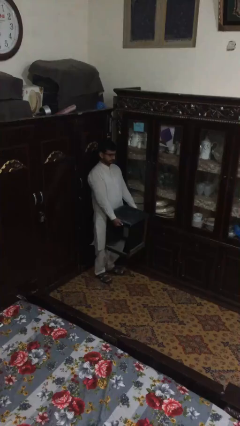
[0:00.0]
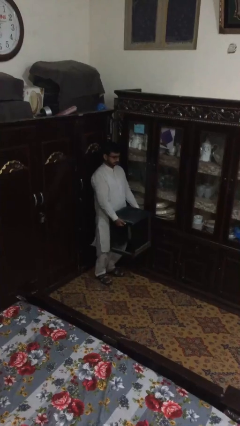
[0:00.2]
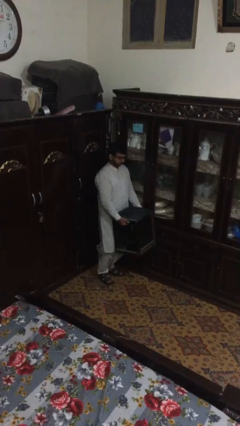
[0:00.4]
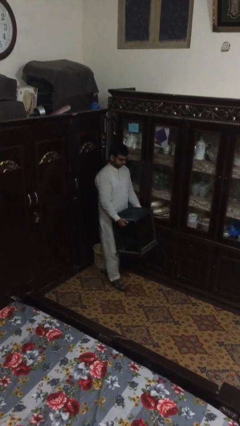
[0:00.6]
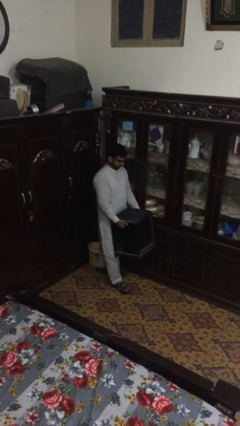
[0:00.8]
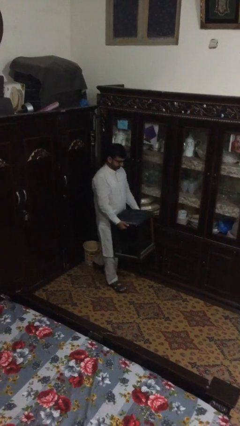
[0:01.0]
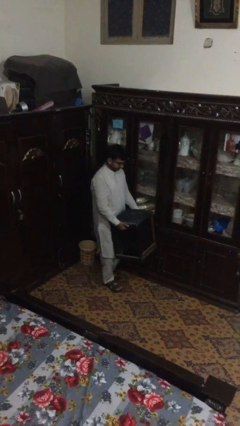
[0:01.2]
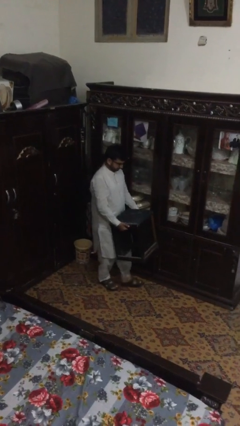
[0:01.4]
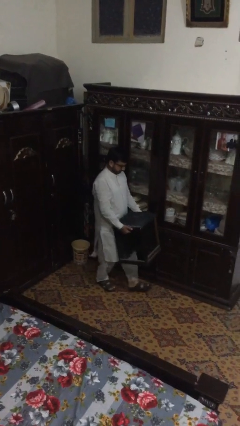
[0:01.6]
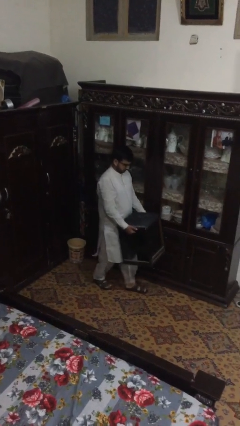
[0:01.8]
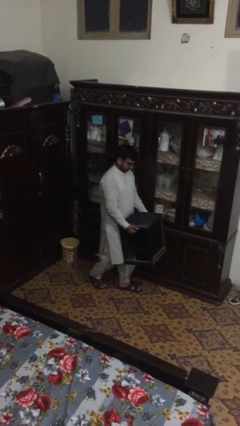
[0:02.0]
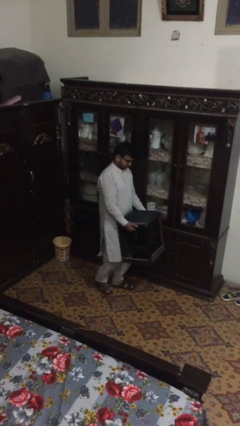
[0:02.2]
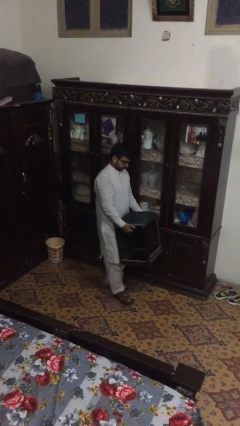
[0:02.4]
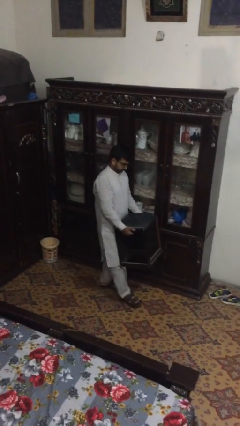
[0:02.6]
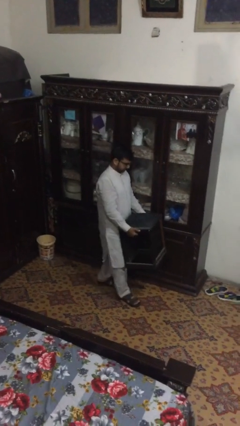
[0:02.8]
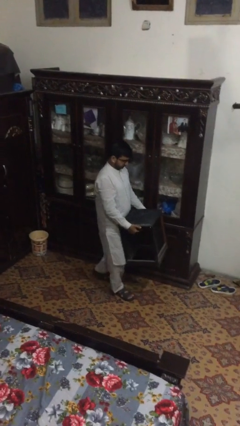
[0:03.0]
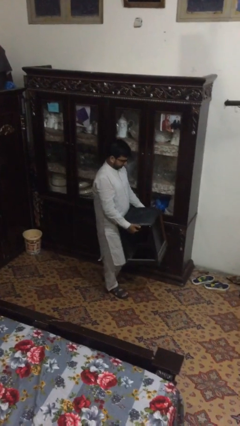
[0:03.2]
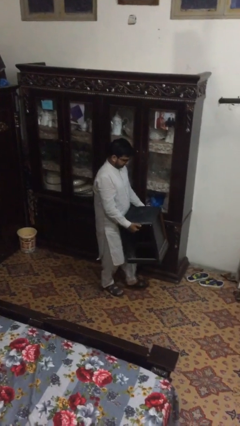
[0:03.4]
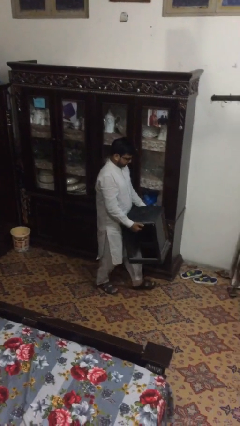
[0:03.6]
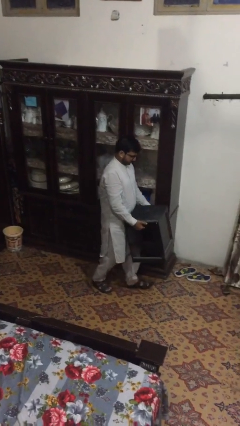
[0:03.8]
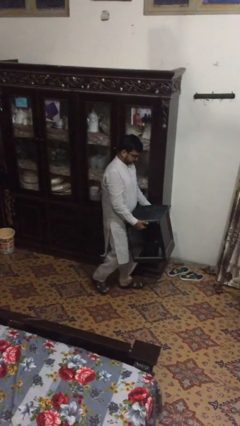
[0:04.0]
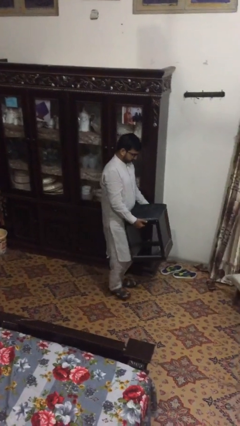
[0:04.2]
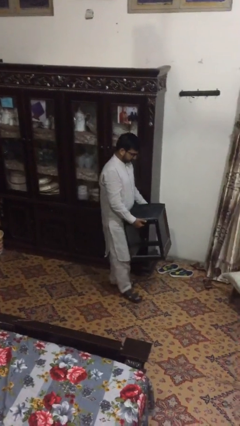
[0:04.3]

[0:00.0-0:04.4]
person carries heavy object

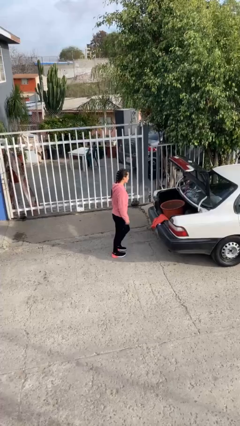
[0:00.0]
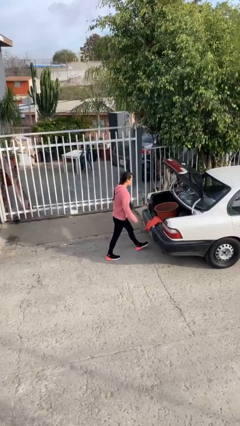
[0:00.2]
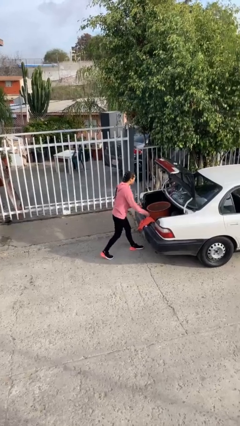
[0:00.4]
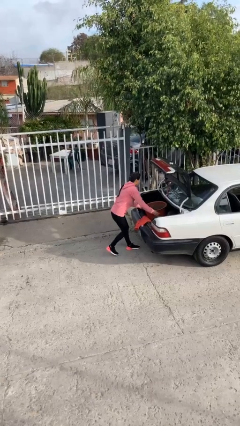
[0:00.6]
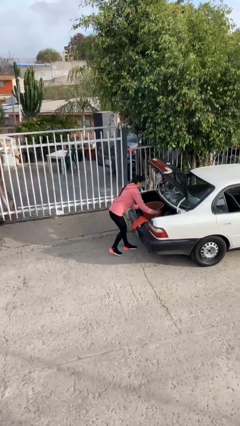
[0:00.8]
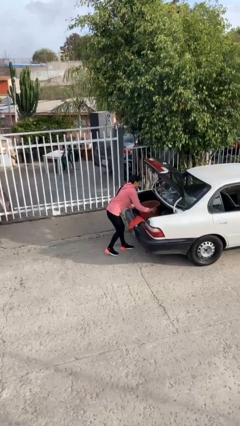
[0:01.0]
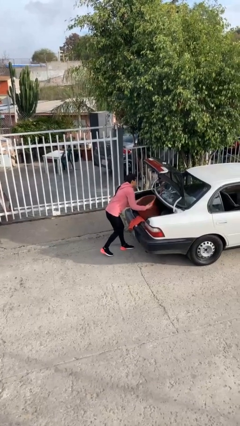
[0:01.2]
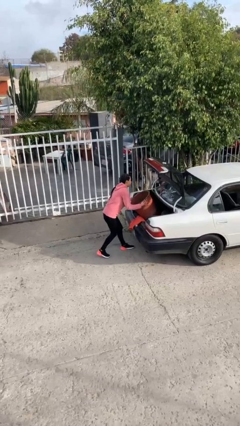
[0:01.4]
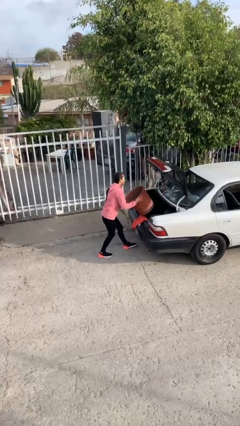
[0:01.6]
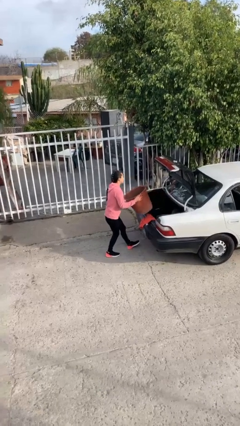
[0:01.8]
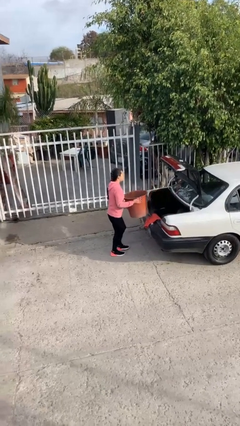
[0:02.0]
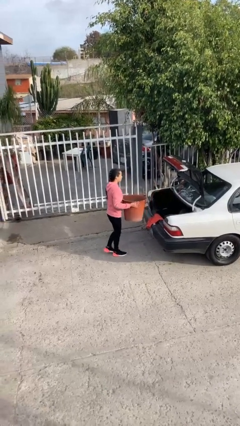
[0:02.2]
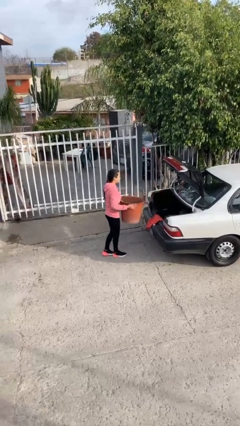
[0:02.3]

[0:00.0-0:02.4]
person unloads car

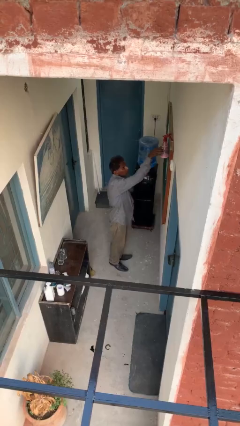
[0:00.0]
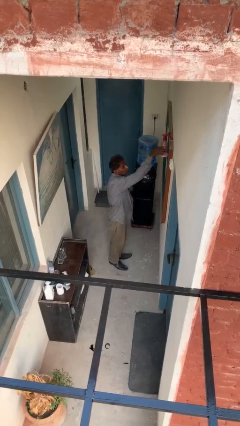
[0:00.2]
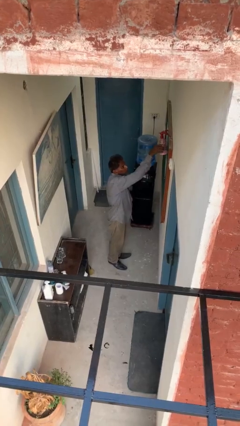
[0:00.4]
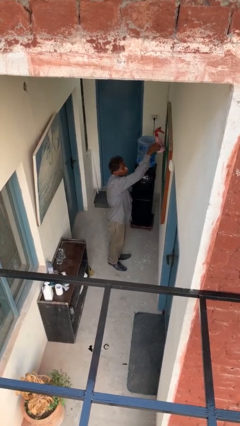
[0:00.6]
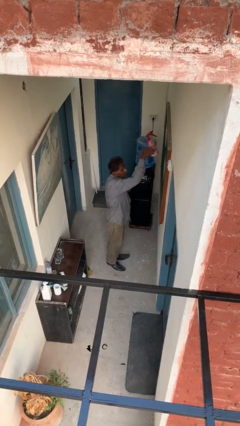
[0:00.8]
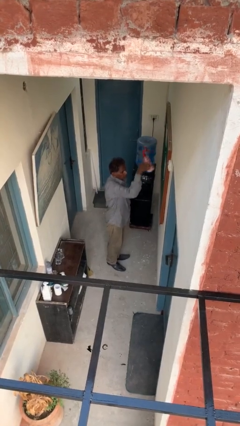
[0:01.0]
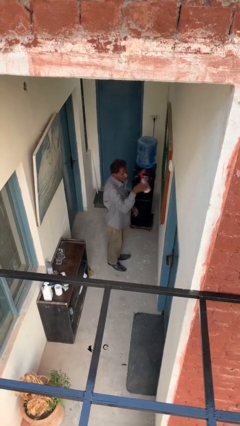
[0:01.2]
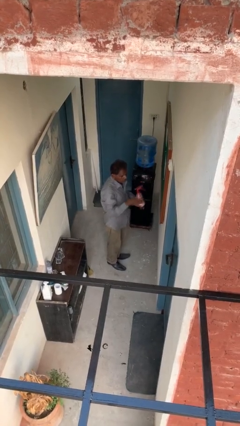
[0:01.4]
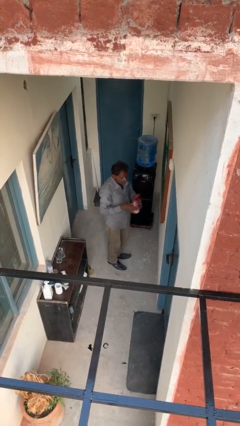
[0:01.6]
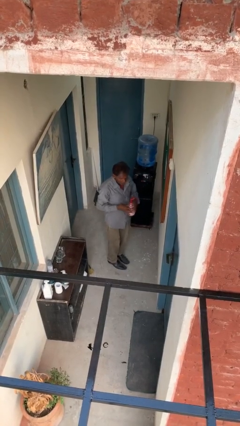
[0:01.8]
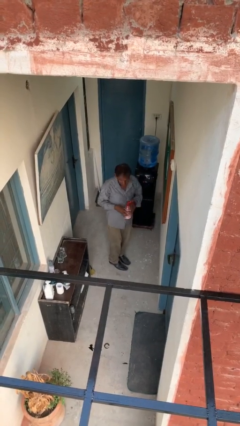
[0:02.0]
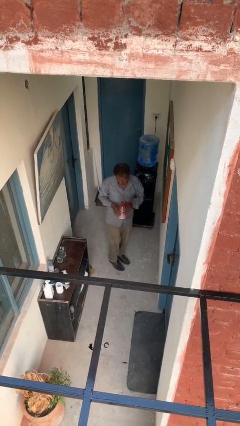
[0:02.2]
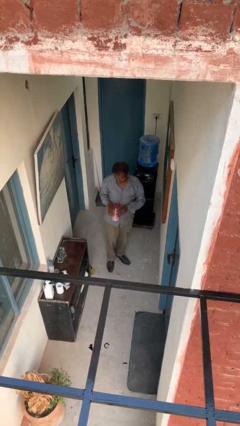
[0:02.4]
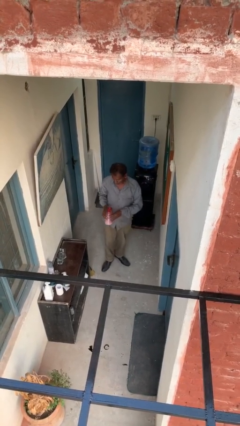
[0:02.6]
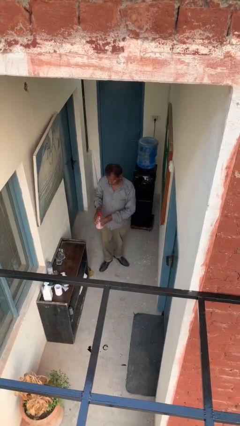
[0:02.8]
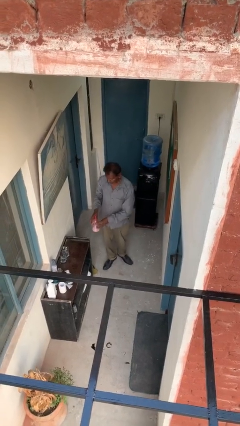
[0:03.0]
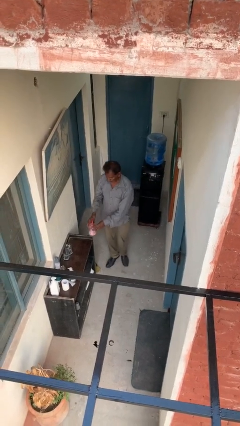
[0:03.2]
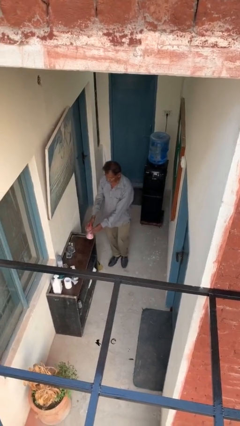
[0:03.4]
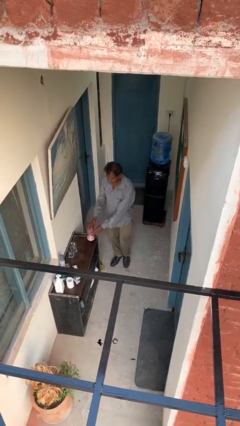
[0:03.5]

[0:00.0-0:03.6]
person picks up object from shelf

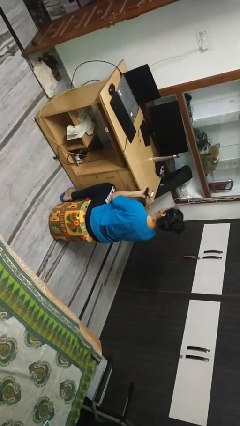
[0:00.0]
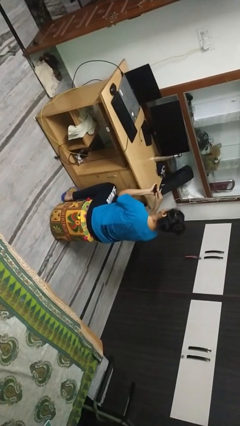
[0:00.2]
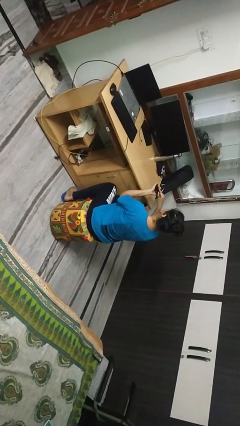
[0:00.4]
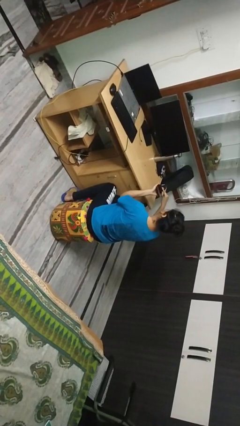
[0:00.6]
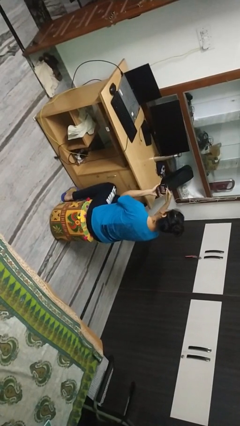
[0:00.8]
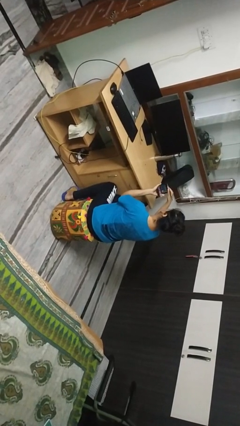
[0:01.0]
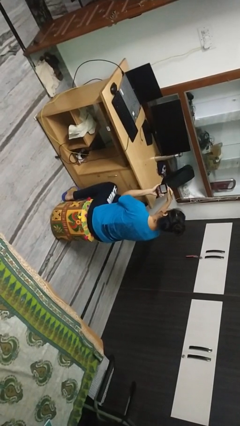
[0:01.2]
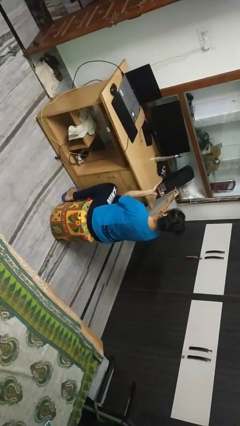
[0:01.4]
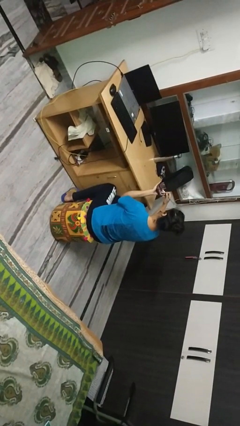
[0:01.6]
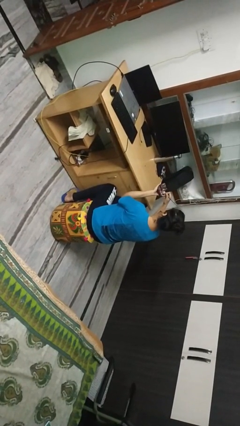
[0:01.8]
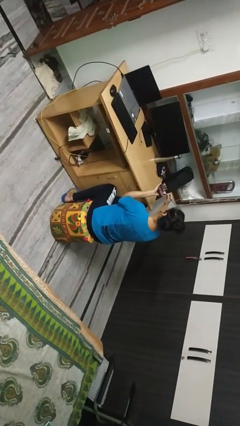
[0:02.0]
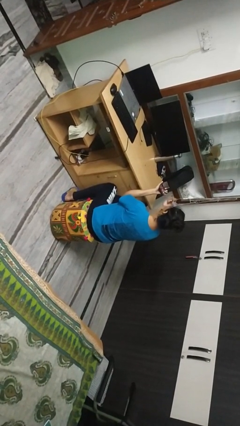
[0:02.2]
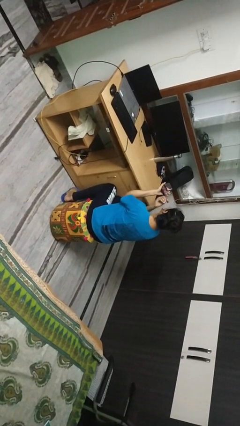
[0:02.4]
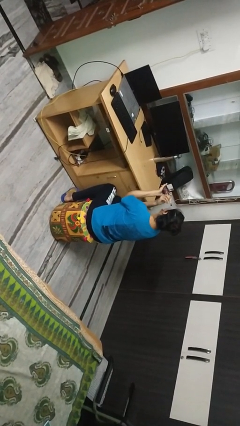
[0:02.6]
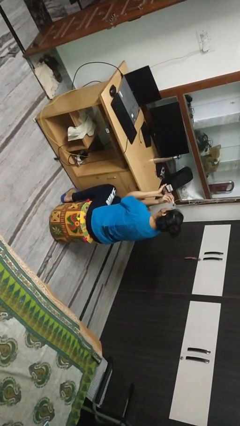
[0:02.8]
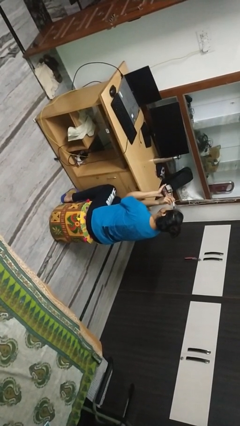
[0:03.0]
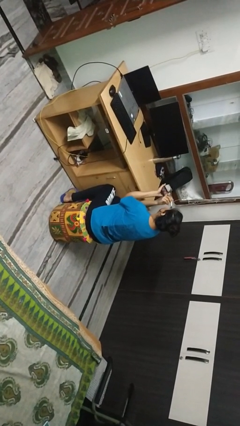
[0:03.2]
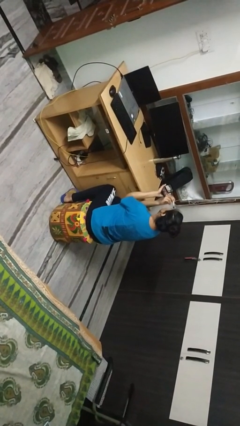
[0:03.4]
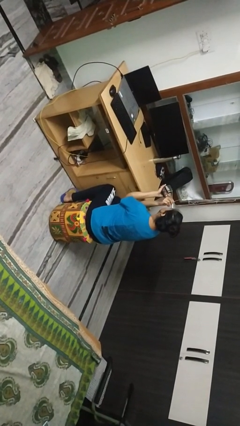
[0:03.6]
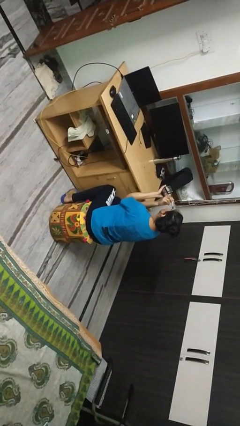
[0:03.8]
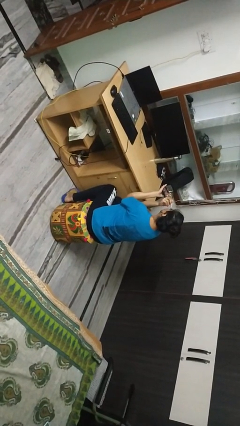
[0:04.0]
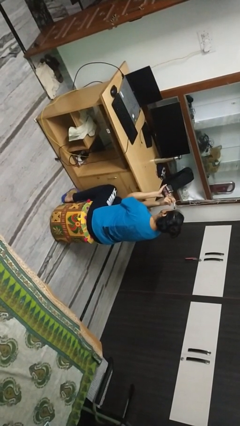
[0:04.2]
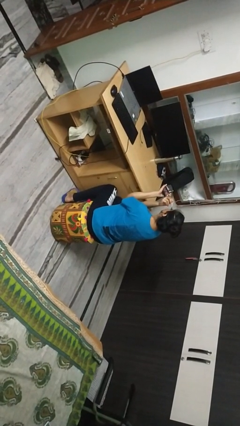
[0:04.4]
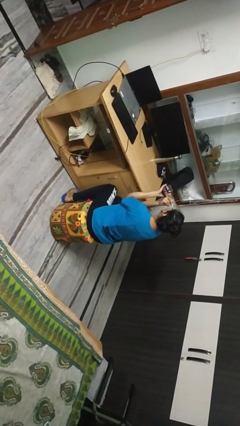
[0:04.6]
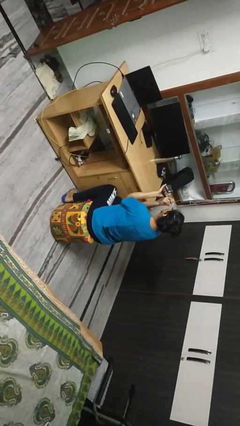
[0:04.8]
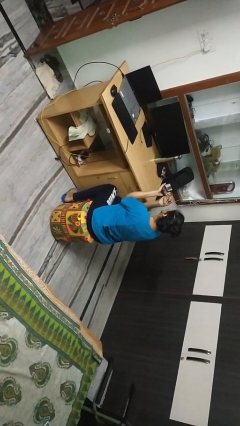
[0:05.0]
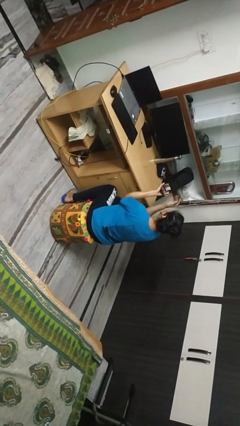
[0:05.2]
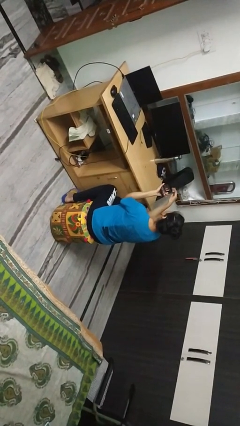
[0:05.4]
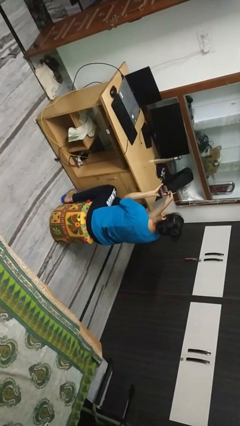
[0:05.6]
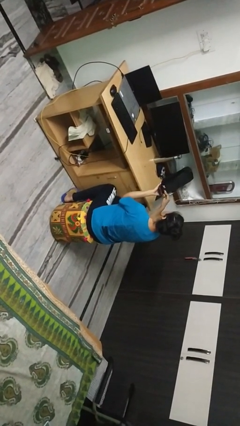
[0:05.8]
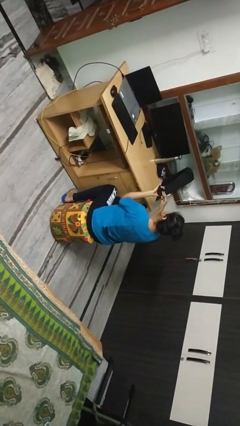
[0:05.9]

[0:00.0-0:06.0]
person applies eye makeup

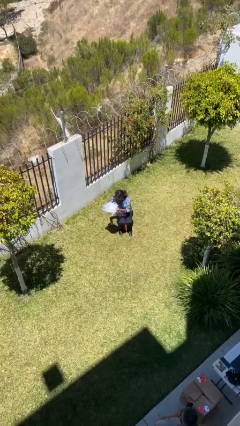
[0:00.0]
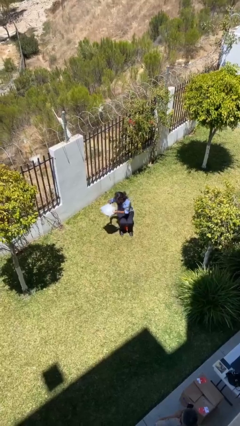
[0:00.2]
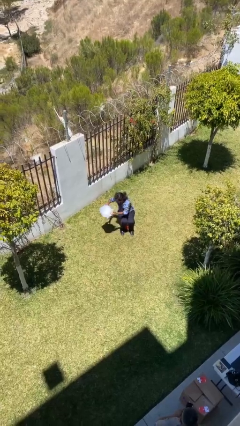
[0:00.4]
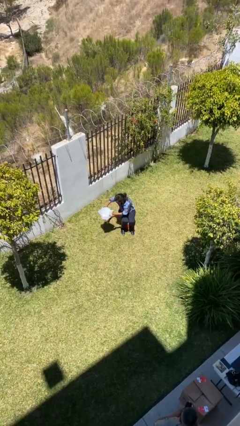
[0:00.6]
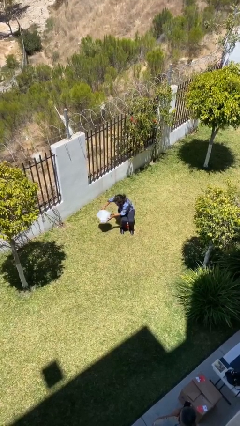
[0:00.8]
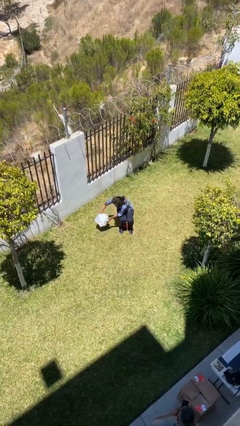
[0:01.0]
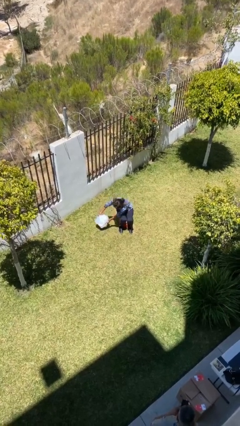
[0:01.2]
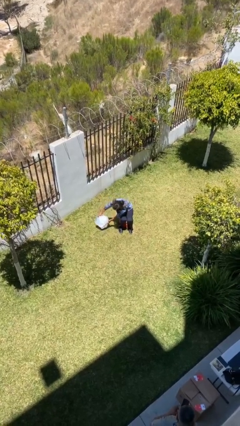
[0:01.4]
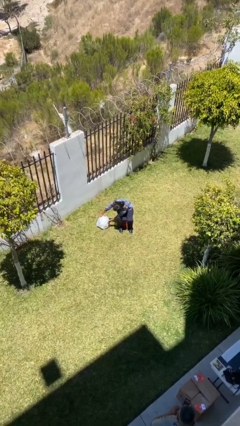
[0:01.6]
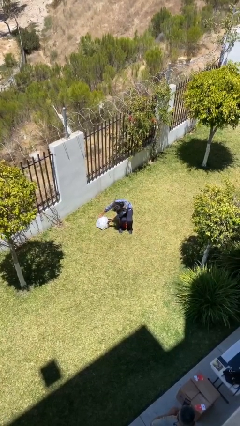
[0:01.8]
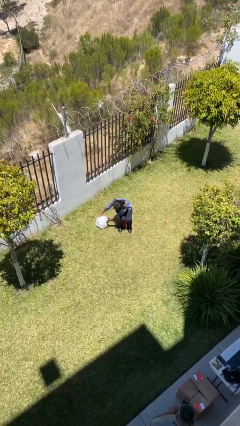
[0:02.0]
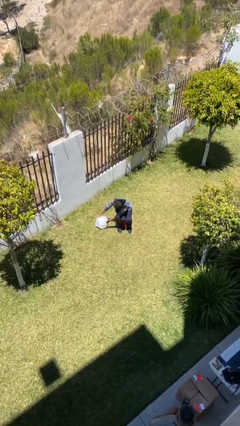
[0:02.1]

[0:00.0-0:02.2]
person puts down object on floor
